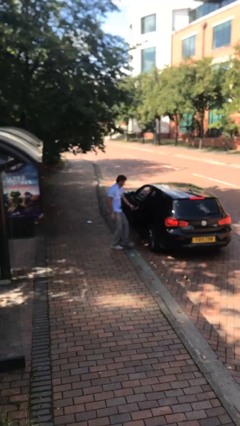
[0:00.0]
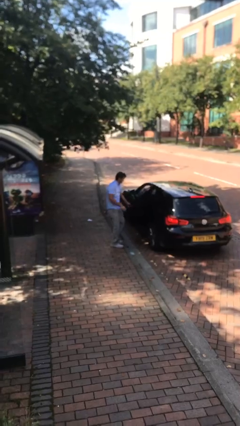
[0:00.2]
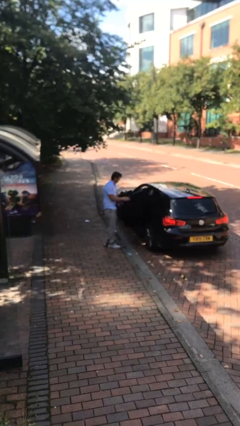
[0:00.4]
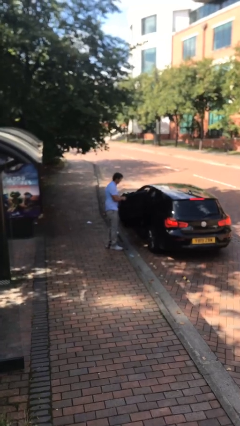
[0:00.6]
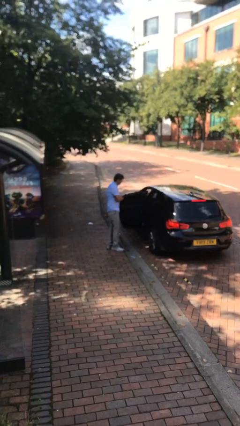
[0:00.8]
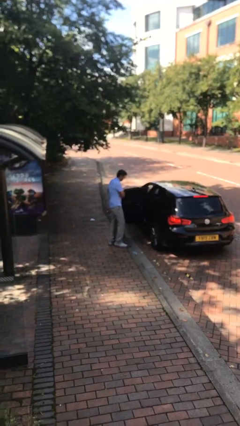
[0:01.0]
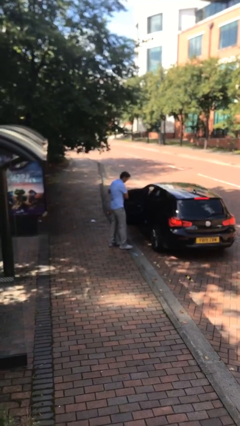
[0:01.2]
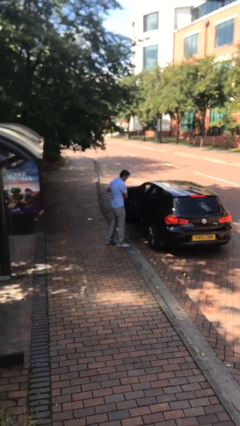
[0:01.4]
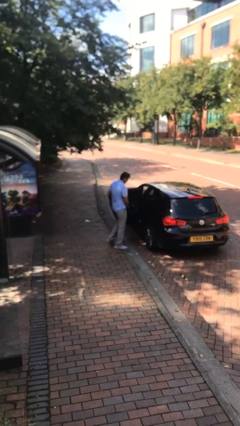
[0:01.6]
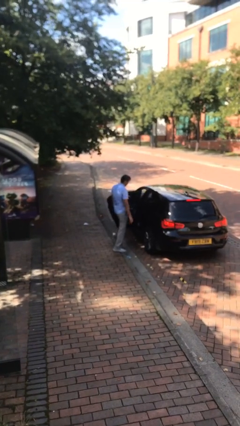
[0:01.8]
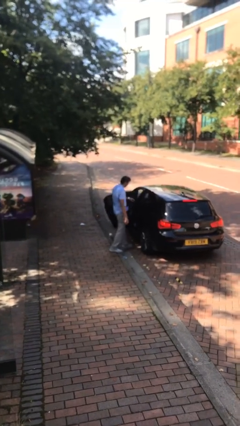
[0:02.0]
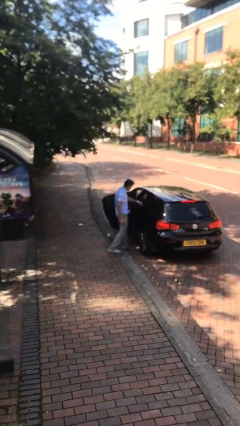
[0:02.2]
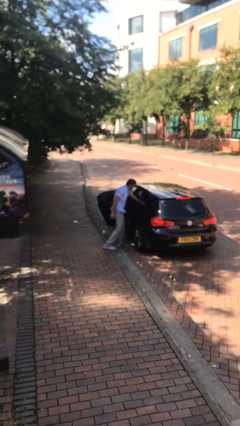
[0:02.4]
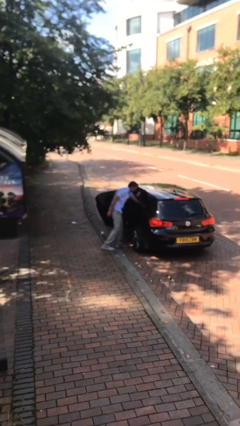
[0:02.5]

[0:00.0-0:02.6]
person opens car door

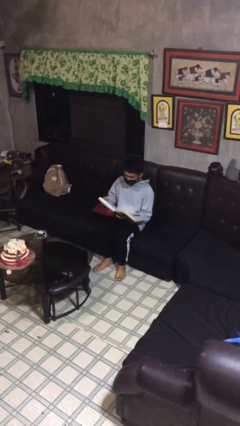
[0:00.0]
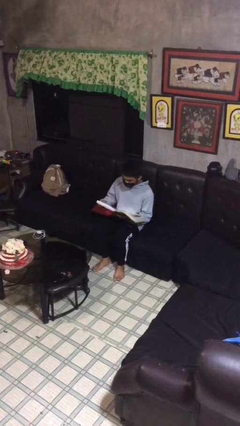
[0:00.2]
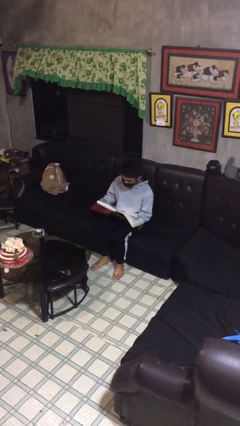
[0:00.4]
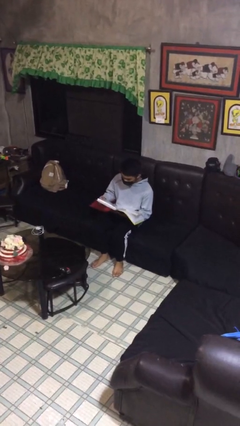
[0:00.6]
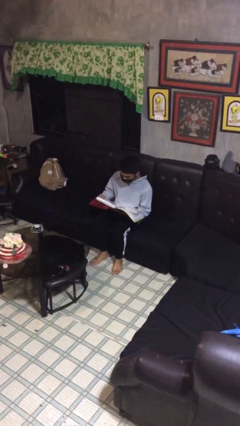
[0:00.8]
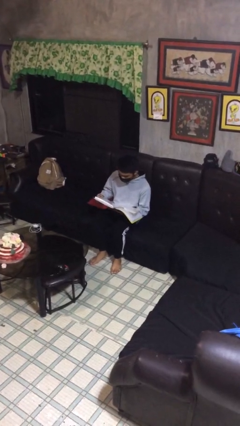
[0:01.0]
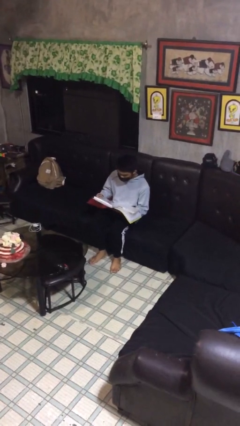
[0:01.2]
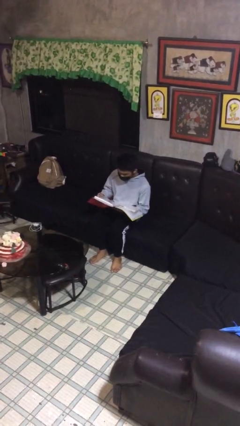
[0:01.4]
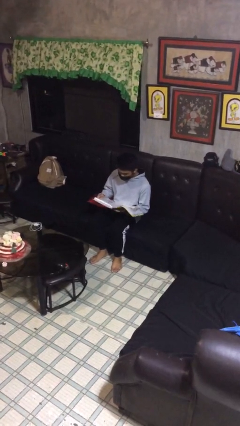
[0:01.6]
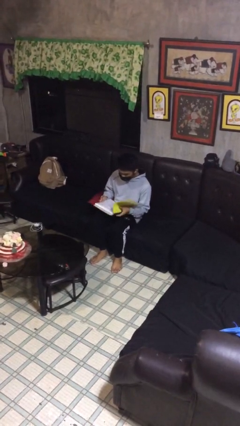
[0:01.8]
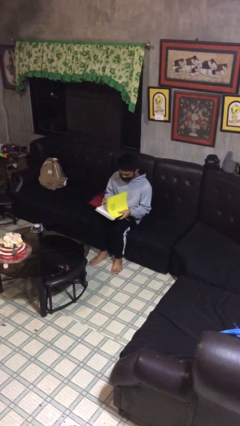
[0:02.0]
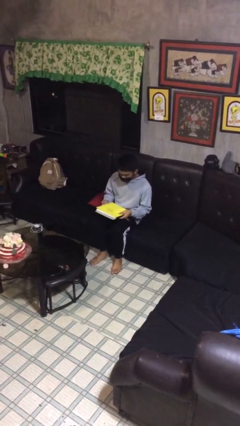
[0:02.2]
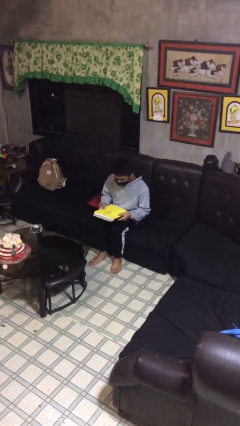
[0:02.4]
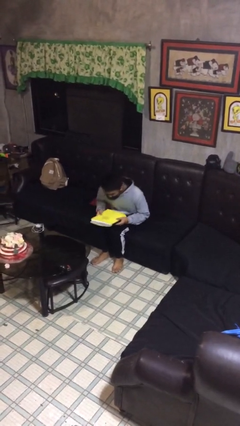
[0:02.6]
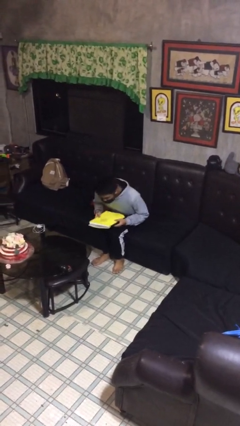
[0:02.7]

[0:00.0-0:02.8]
person reads document

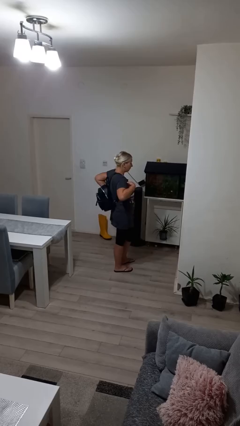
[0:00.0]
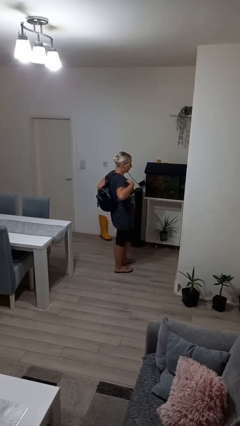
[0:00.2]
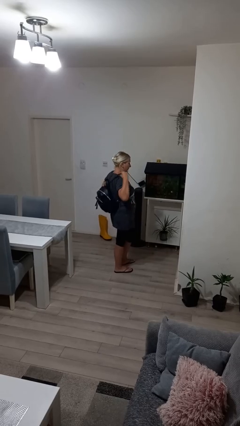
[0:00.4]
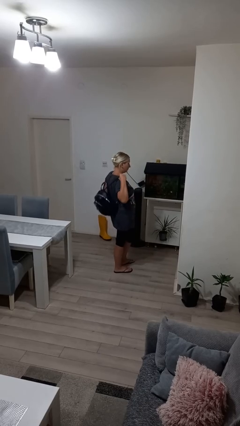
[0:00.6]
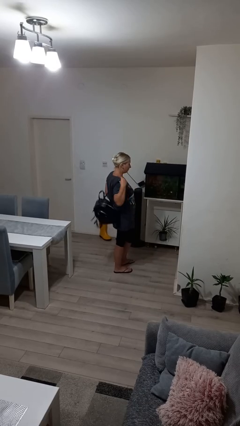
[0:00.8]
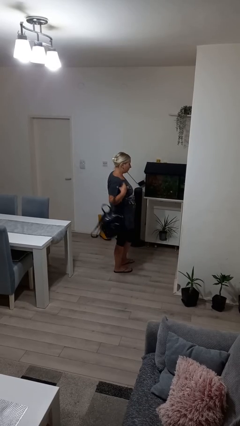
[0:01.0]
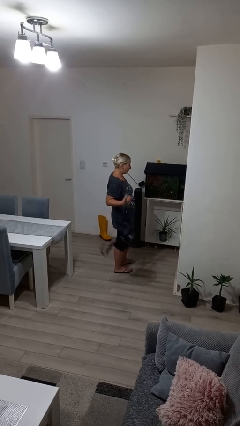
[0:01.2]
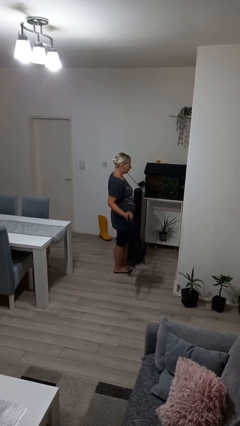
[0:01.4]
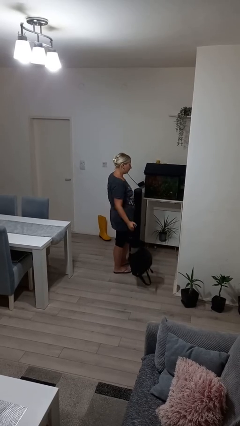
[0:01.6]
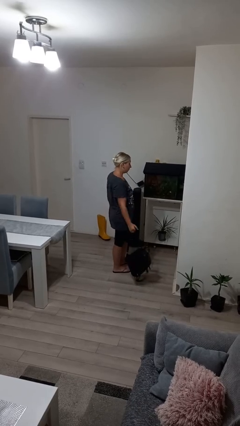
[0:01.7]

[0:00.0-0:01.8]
person takes off backpack

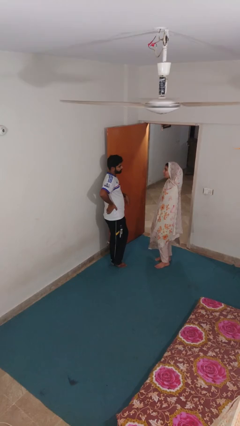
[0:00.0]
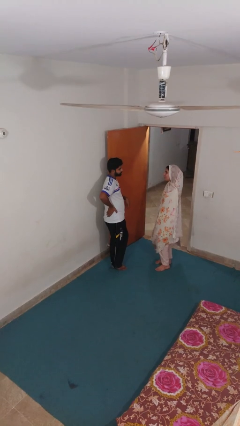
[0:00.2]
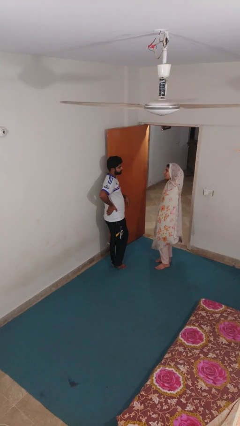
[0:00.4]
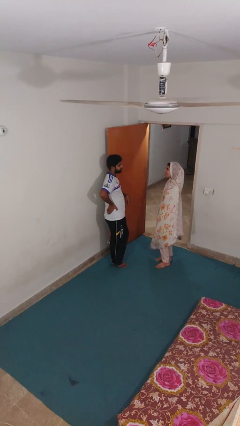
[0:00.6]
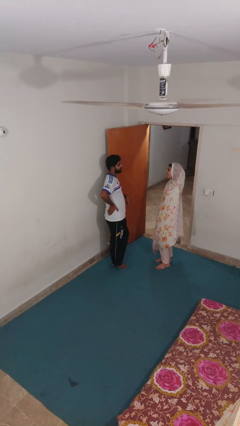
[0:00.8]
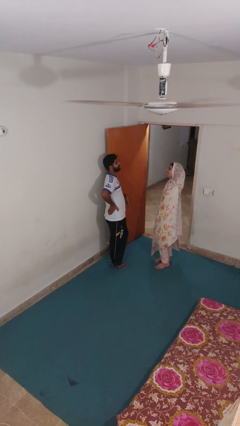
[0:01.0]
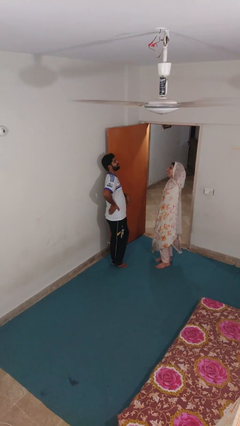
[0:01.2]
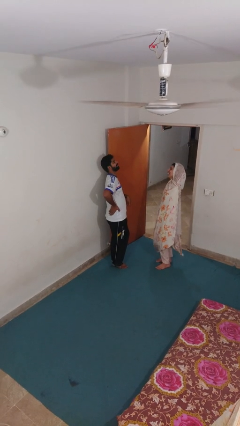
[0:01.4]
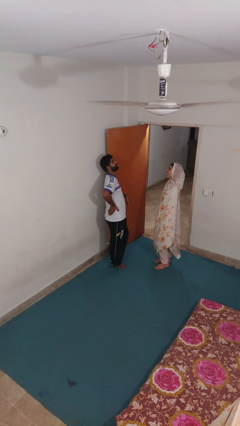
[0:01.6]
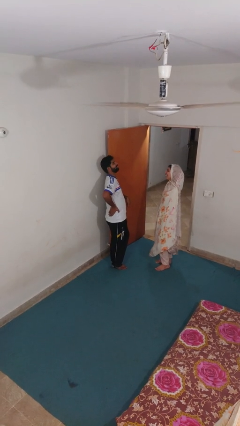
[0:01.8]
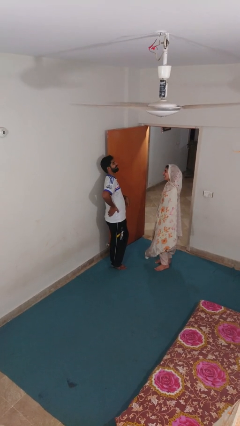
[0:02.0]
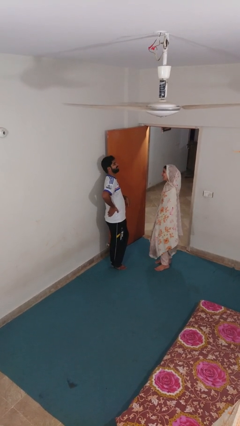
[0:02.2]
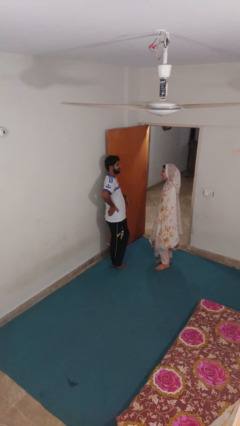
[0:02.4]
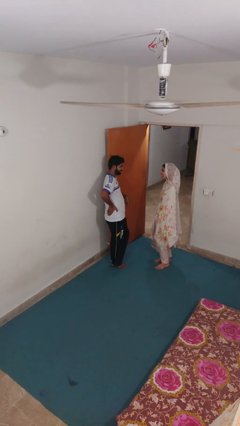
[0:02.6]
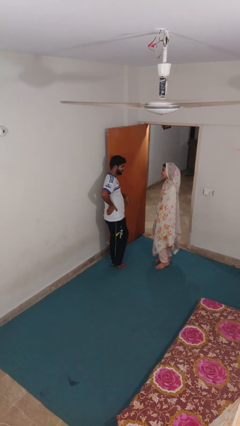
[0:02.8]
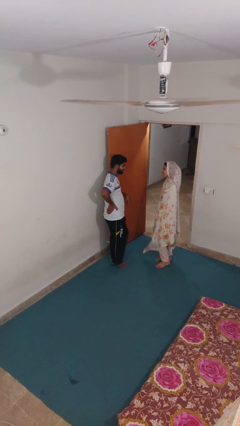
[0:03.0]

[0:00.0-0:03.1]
person laughs with person

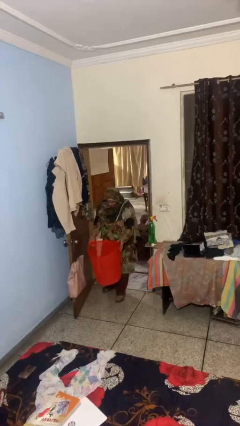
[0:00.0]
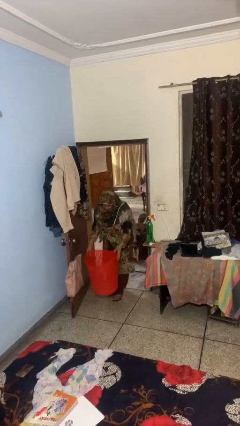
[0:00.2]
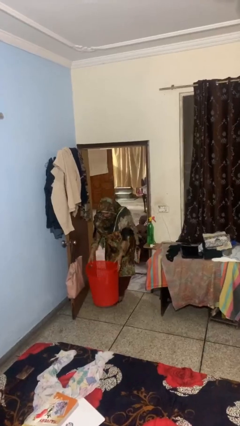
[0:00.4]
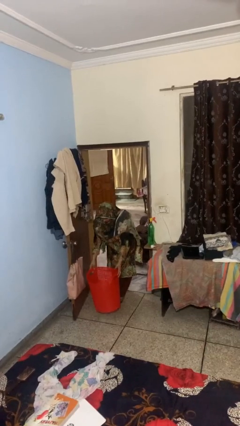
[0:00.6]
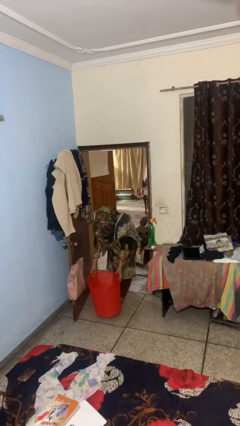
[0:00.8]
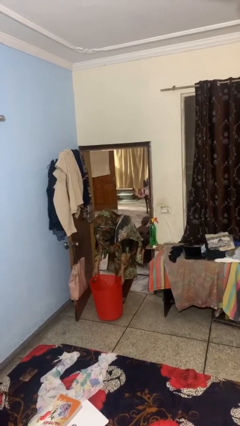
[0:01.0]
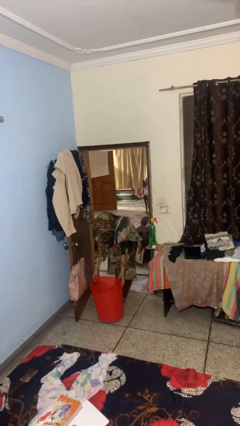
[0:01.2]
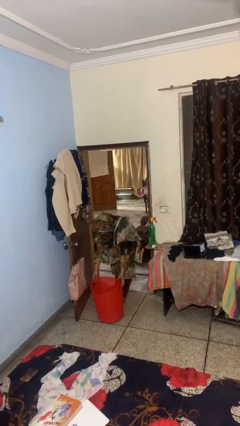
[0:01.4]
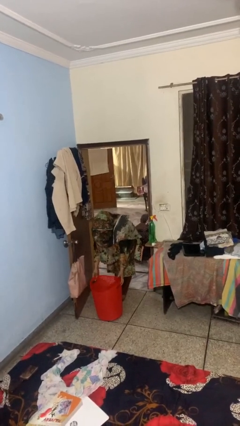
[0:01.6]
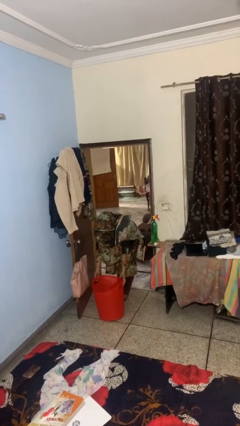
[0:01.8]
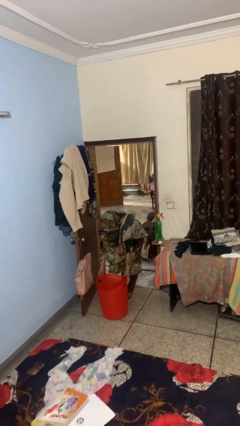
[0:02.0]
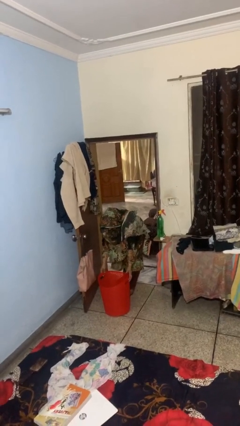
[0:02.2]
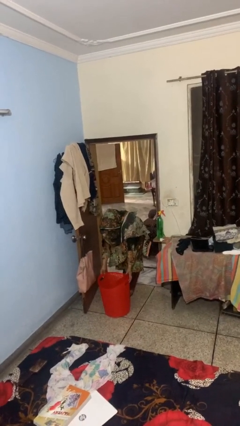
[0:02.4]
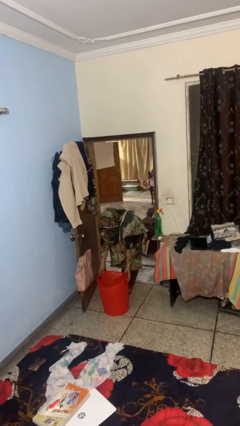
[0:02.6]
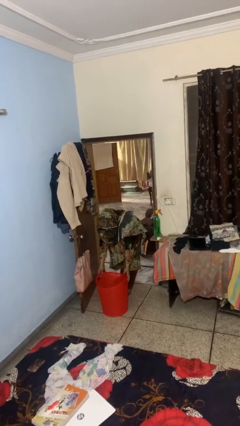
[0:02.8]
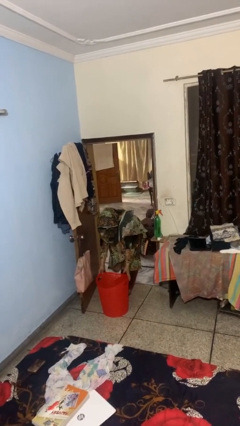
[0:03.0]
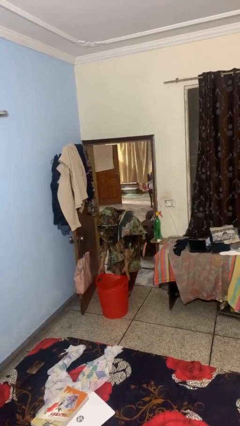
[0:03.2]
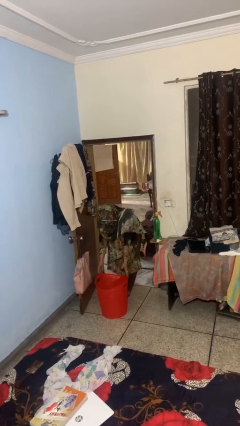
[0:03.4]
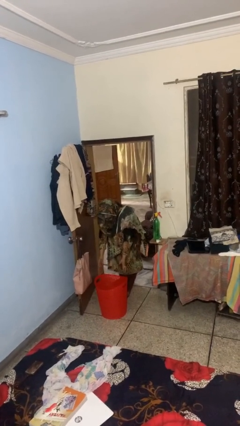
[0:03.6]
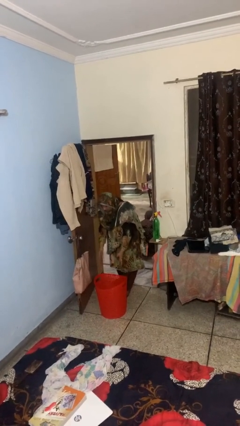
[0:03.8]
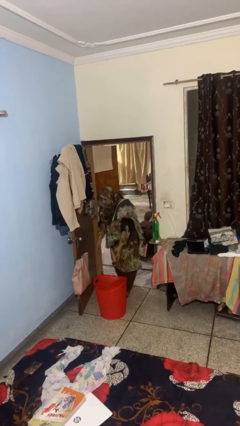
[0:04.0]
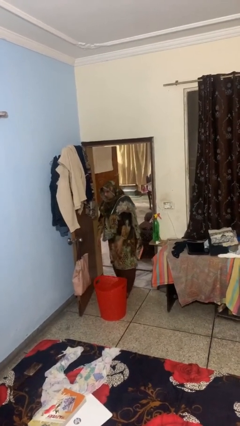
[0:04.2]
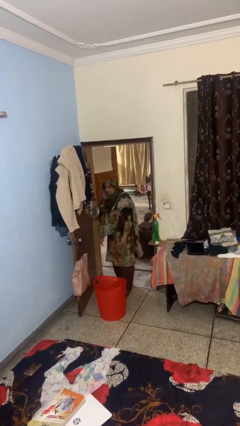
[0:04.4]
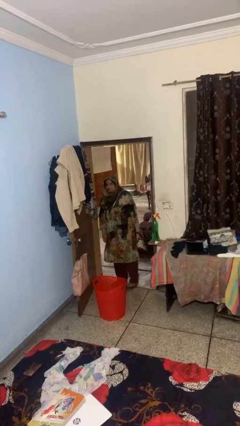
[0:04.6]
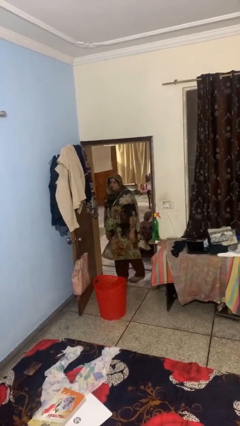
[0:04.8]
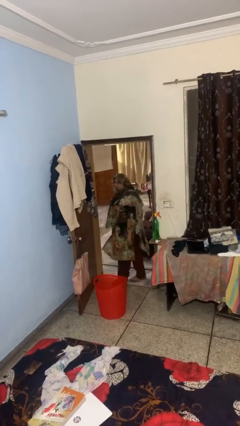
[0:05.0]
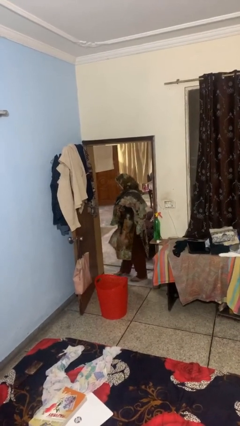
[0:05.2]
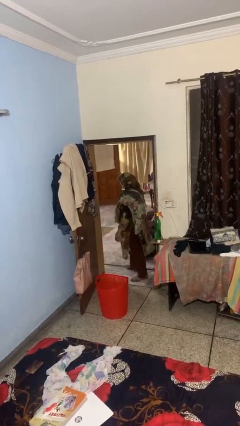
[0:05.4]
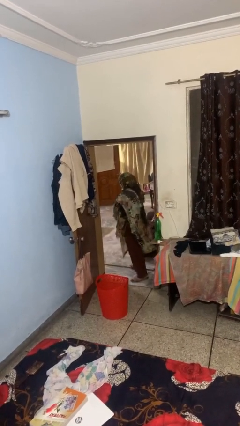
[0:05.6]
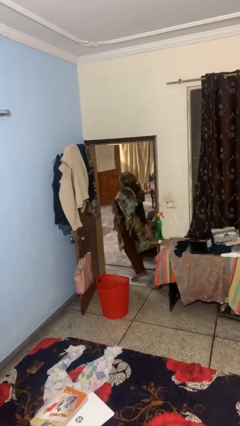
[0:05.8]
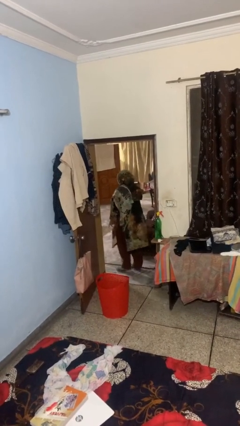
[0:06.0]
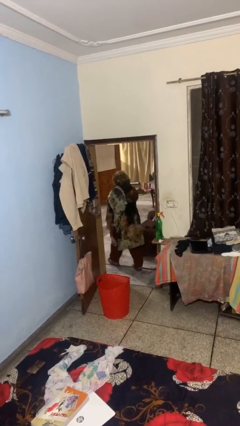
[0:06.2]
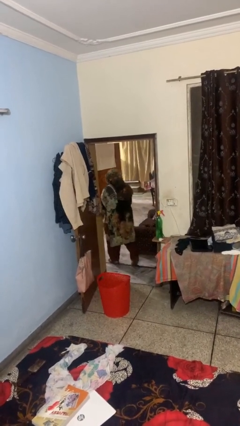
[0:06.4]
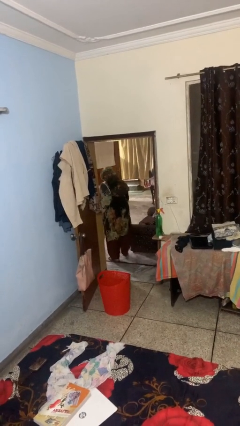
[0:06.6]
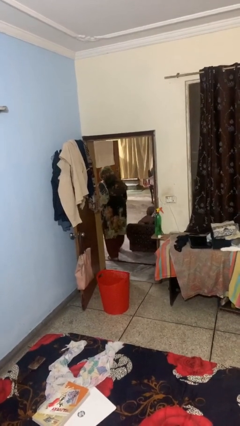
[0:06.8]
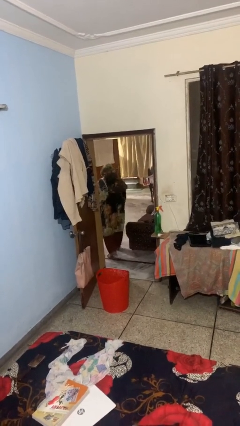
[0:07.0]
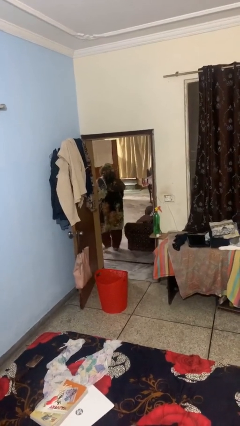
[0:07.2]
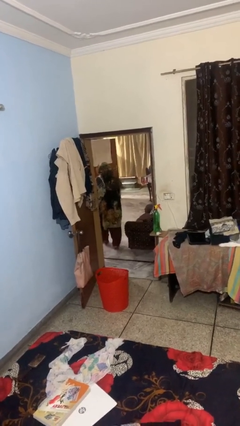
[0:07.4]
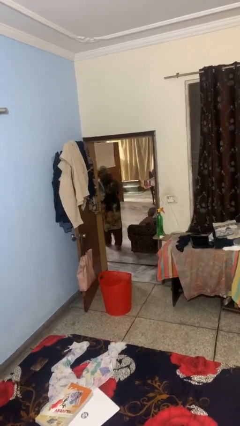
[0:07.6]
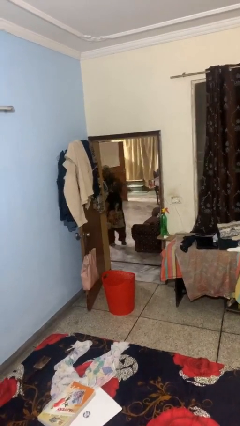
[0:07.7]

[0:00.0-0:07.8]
person puts down object on floor
